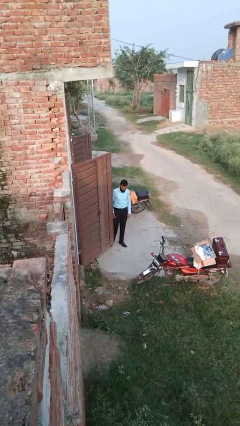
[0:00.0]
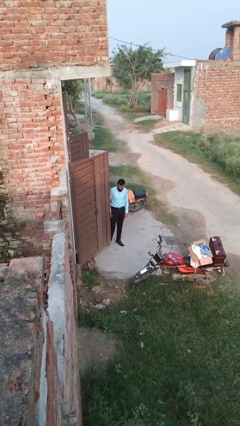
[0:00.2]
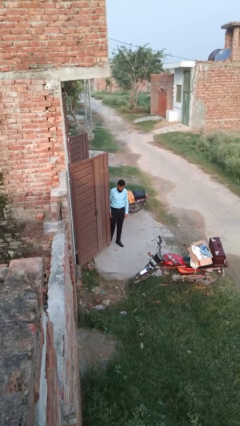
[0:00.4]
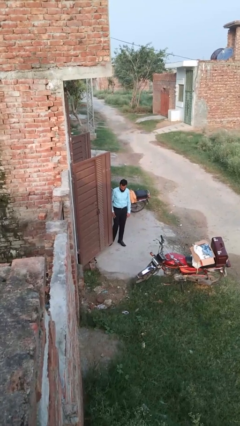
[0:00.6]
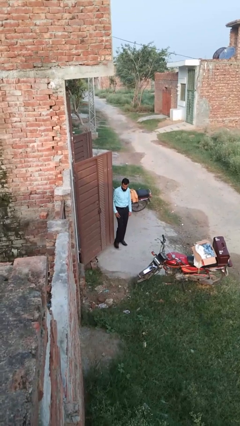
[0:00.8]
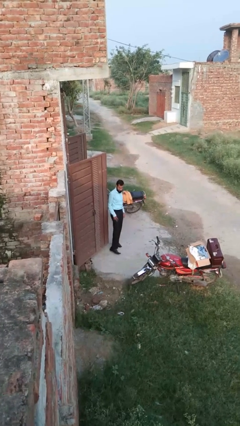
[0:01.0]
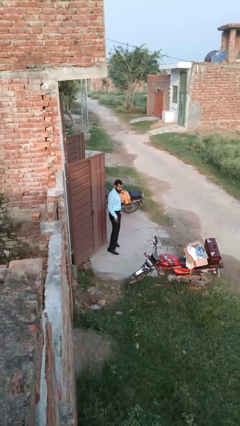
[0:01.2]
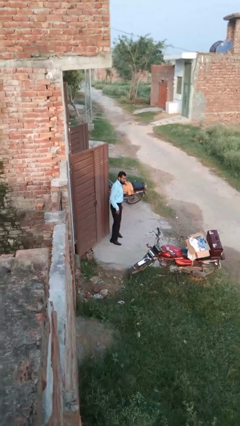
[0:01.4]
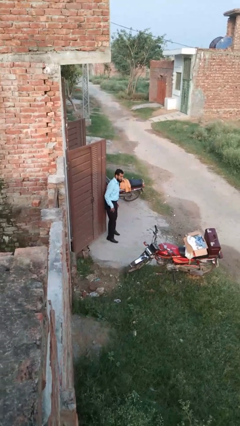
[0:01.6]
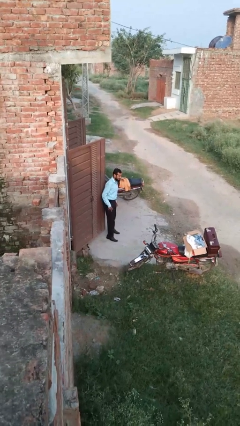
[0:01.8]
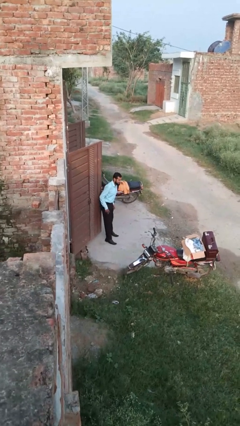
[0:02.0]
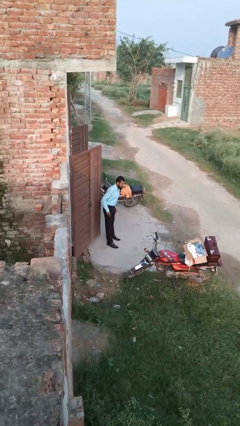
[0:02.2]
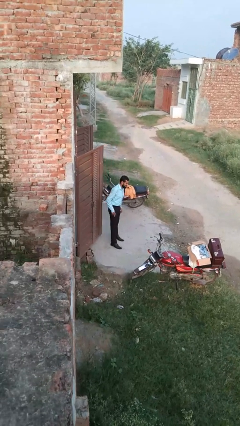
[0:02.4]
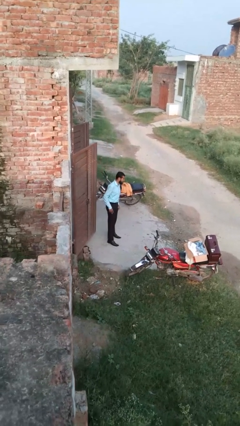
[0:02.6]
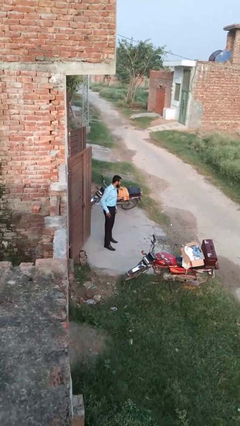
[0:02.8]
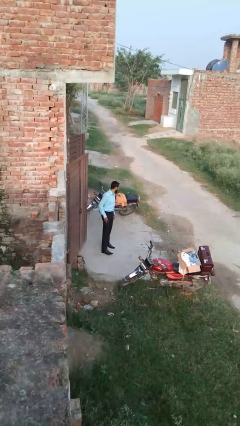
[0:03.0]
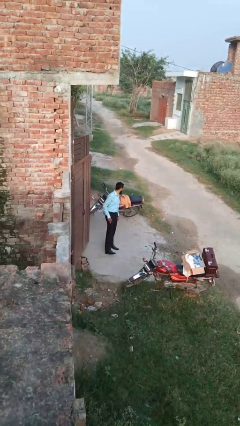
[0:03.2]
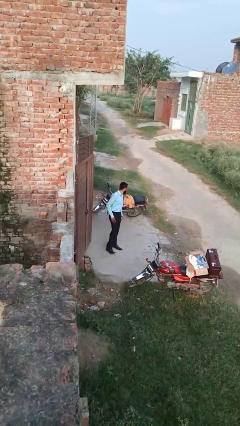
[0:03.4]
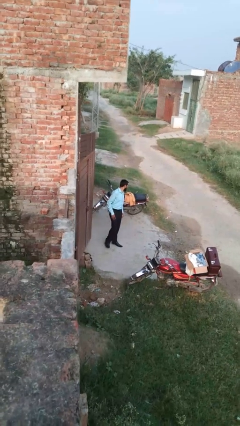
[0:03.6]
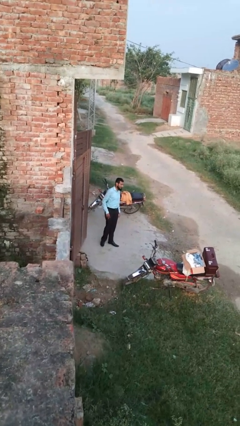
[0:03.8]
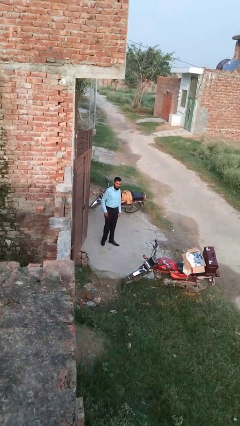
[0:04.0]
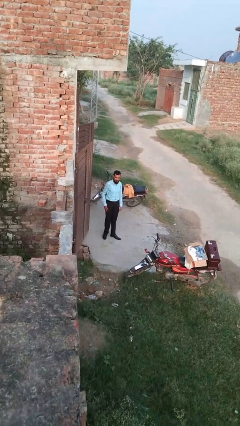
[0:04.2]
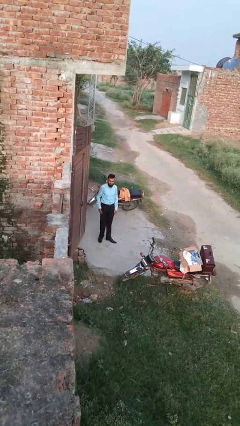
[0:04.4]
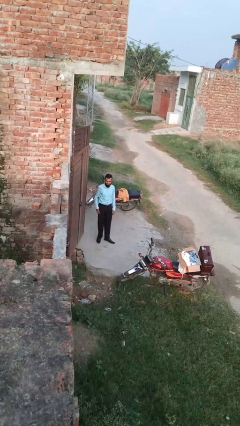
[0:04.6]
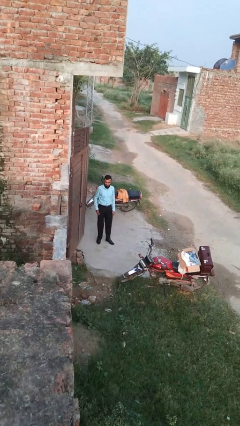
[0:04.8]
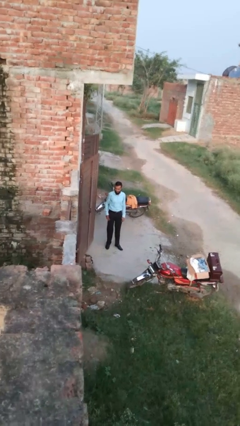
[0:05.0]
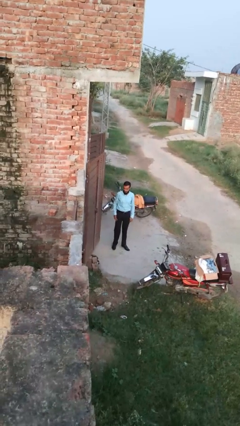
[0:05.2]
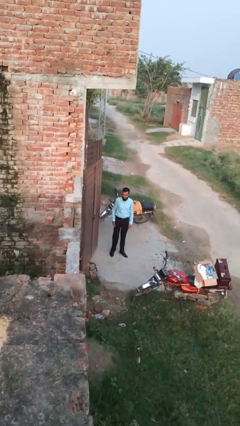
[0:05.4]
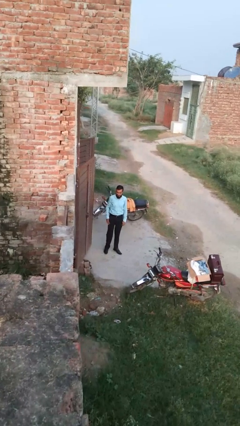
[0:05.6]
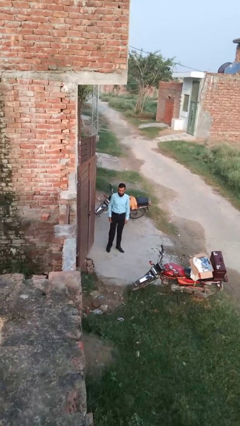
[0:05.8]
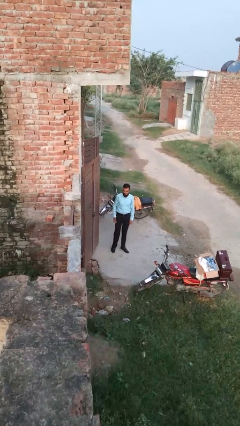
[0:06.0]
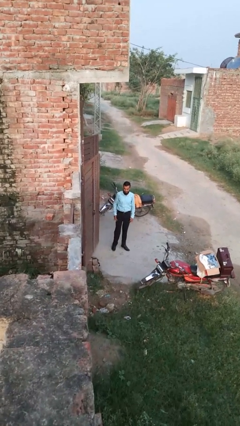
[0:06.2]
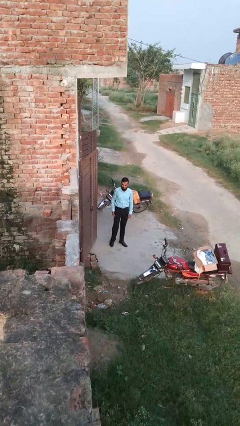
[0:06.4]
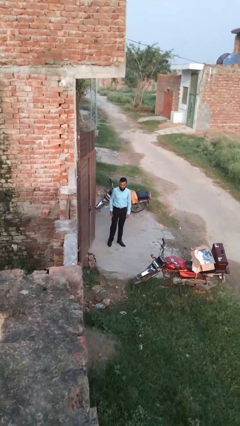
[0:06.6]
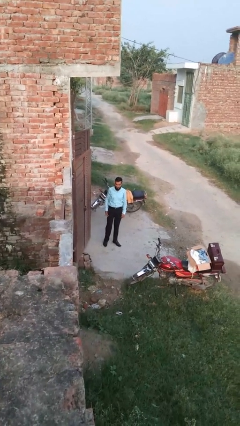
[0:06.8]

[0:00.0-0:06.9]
person closes door with hip

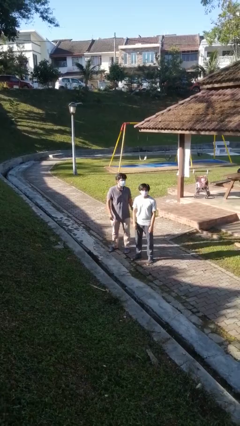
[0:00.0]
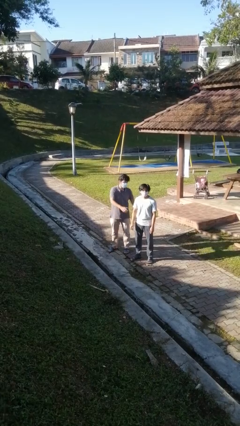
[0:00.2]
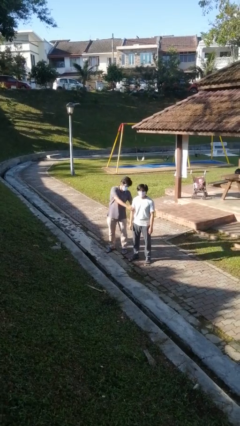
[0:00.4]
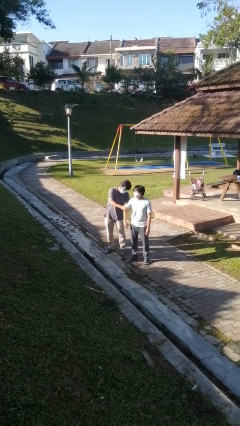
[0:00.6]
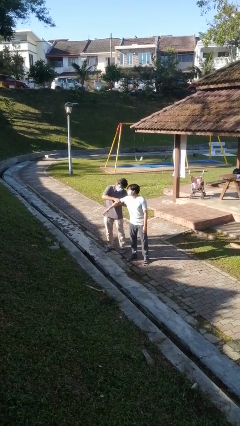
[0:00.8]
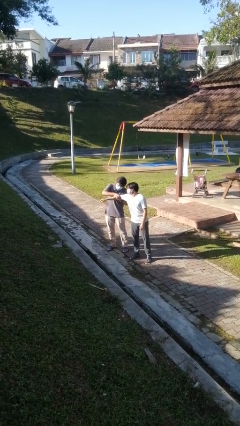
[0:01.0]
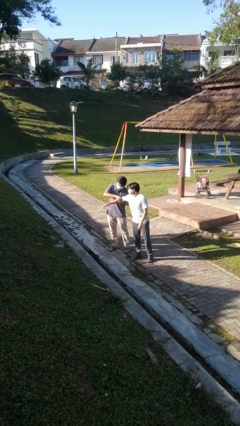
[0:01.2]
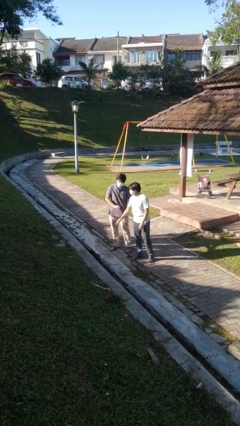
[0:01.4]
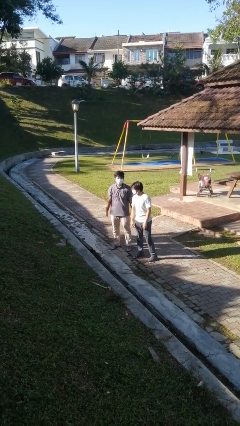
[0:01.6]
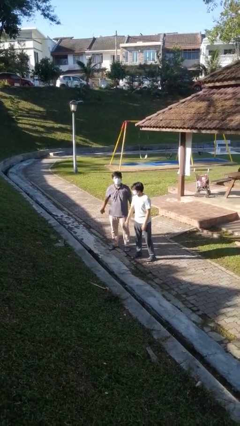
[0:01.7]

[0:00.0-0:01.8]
person grabs person by bicep

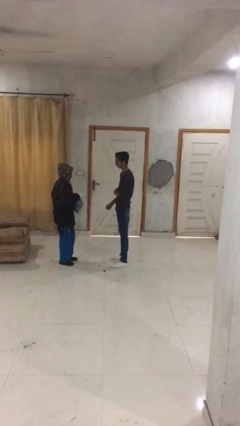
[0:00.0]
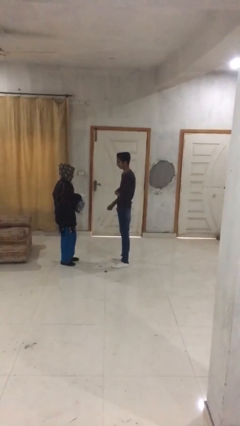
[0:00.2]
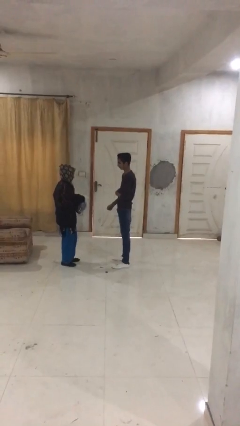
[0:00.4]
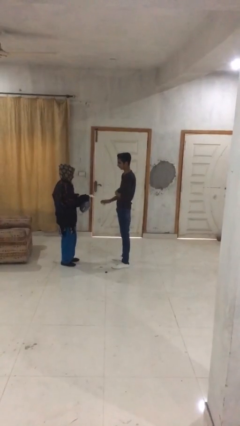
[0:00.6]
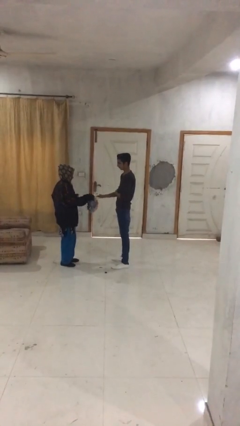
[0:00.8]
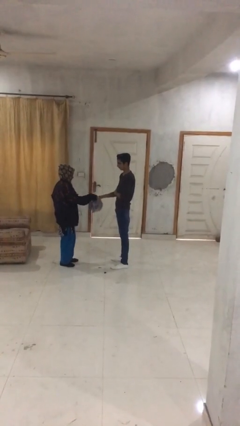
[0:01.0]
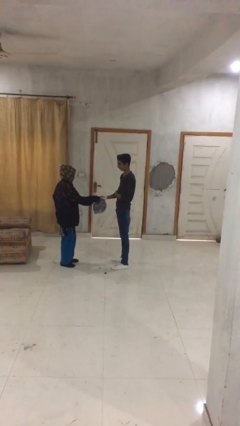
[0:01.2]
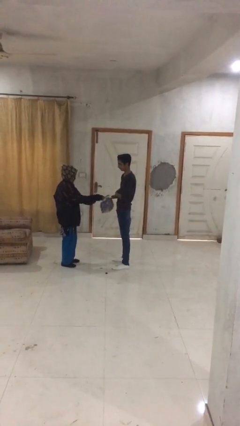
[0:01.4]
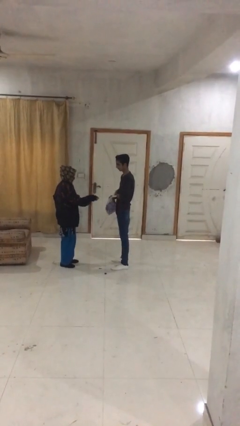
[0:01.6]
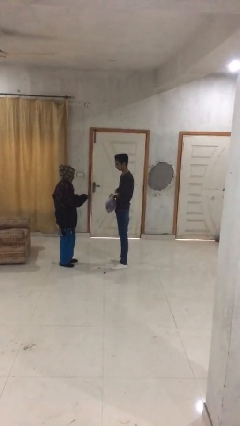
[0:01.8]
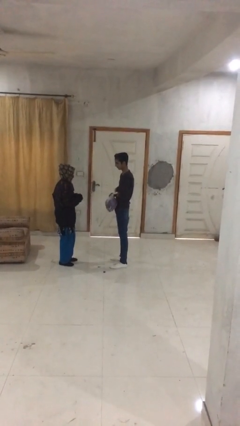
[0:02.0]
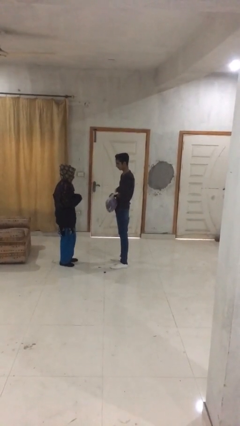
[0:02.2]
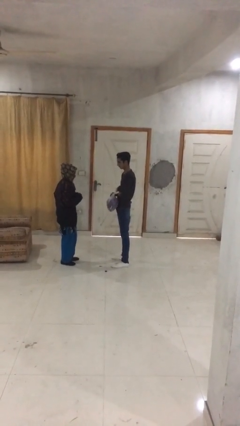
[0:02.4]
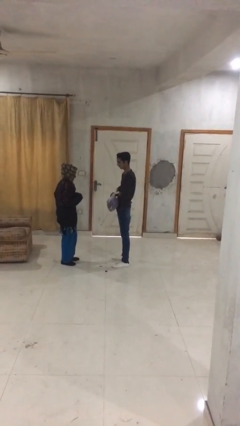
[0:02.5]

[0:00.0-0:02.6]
person transfers object to person

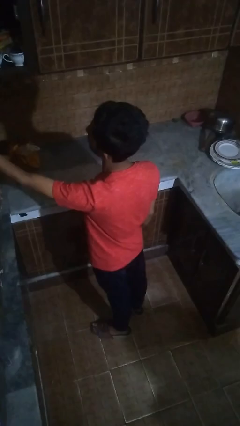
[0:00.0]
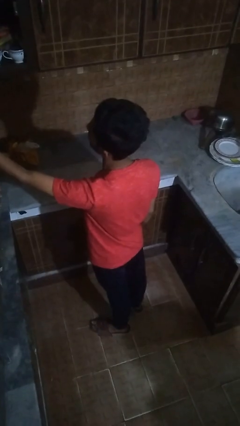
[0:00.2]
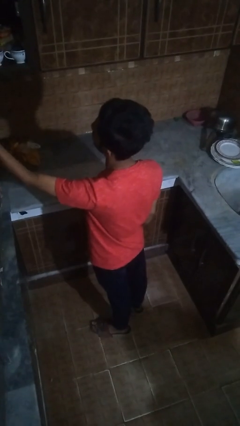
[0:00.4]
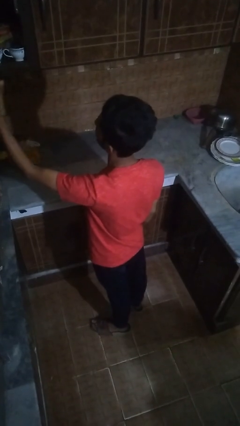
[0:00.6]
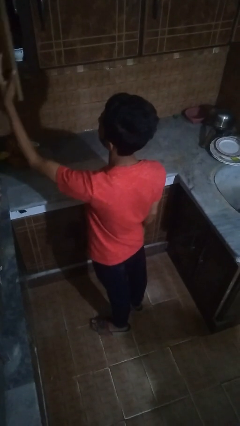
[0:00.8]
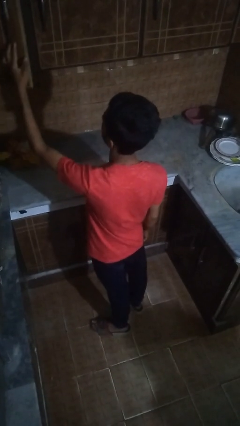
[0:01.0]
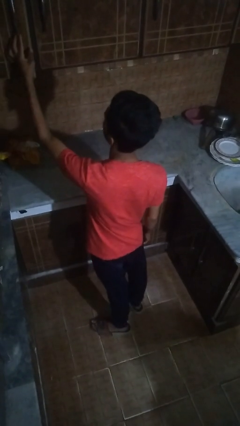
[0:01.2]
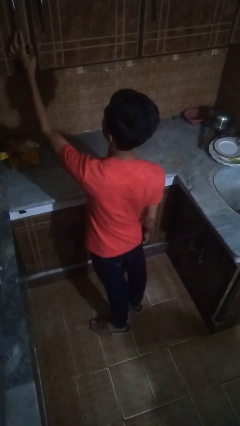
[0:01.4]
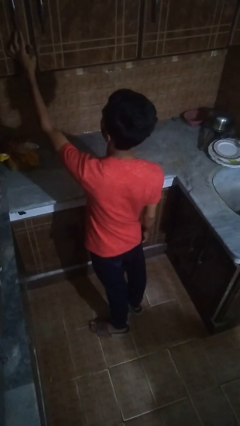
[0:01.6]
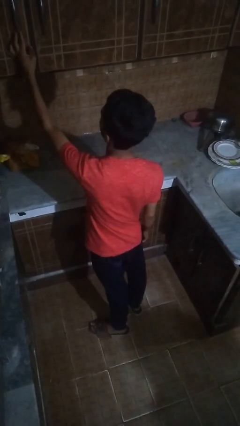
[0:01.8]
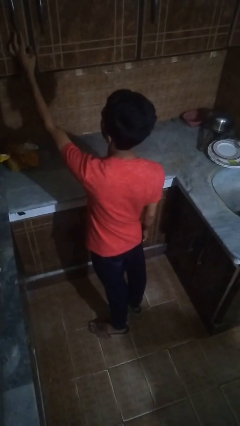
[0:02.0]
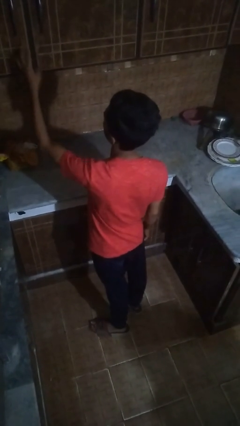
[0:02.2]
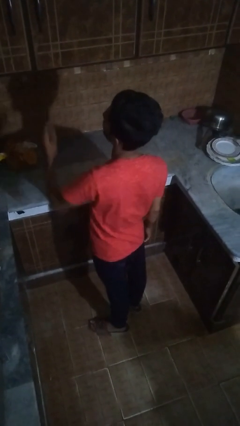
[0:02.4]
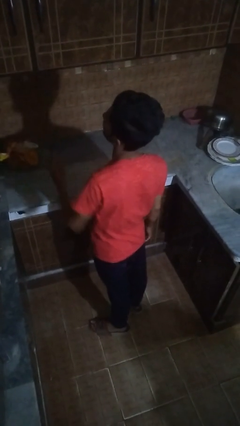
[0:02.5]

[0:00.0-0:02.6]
person closes cabinet

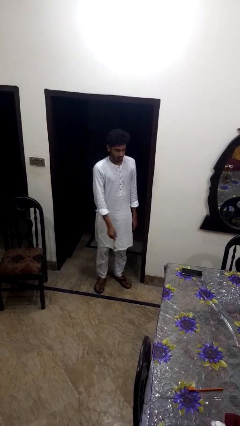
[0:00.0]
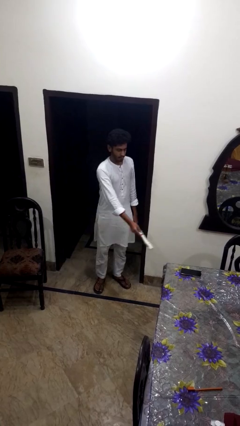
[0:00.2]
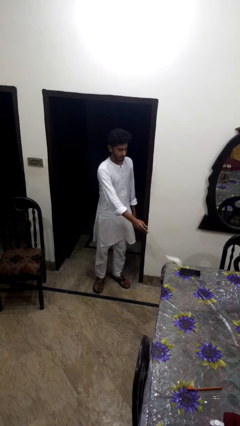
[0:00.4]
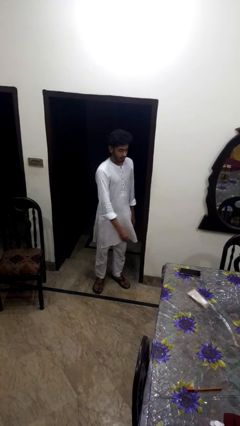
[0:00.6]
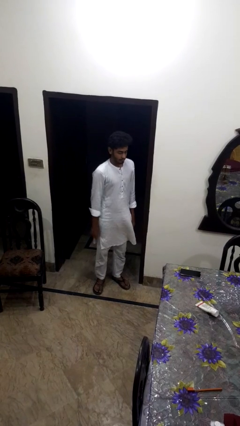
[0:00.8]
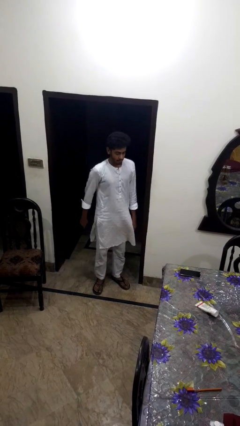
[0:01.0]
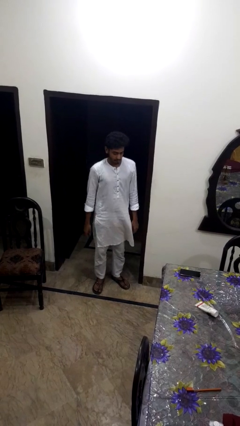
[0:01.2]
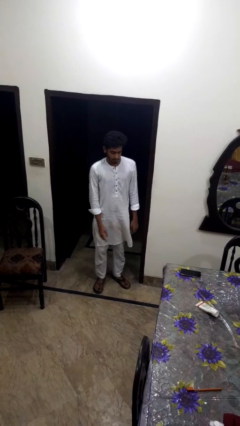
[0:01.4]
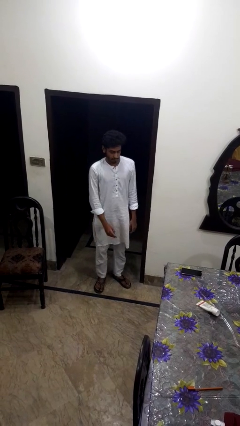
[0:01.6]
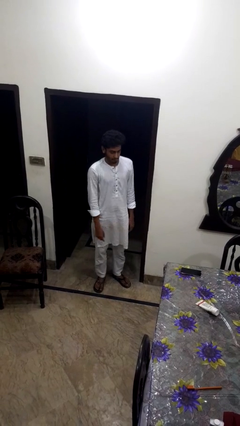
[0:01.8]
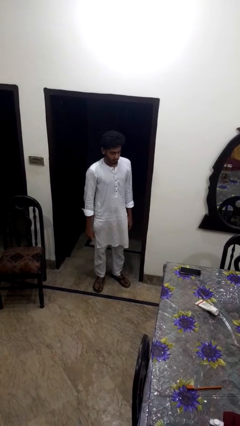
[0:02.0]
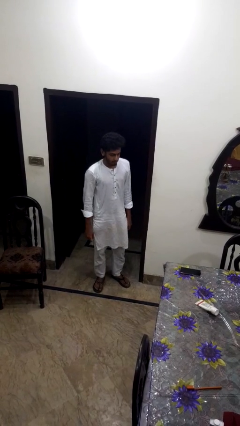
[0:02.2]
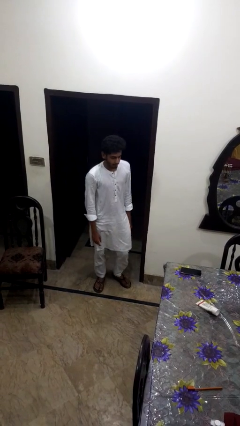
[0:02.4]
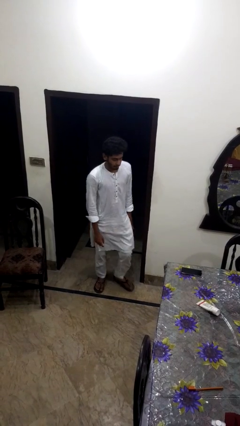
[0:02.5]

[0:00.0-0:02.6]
person throws object on table

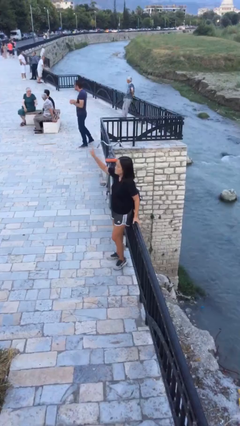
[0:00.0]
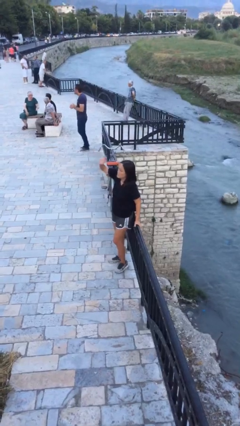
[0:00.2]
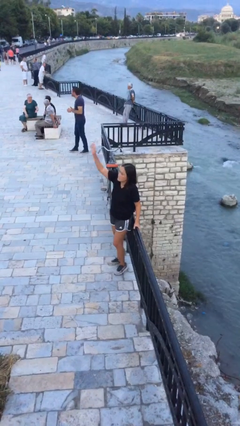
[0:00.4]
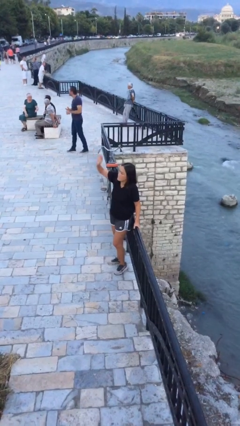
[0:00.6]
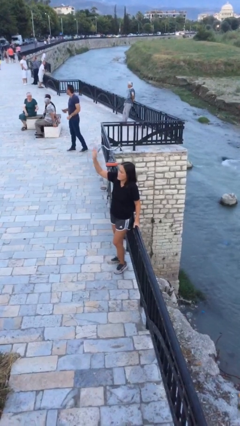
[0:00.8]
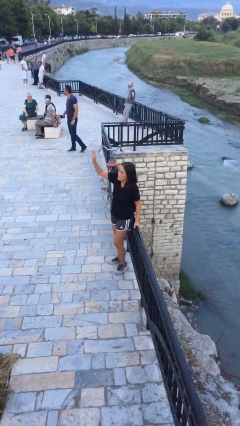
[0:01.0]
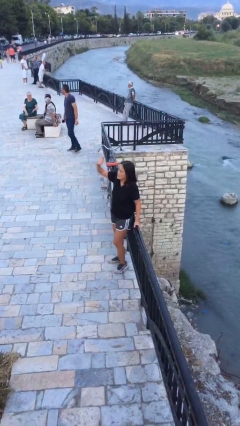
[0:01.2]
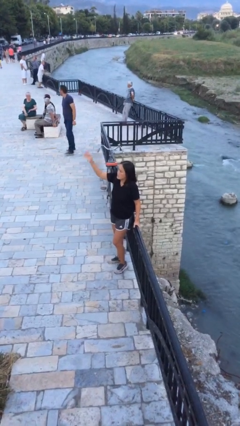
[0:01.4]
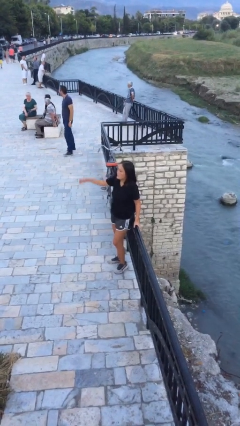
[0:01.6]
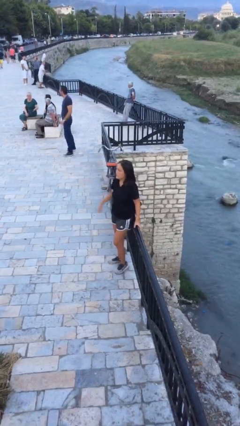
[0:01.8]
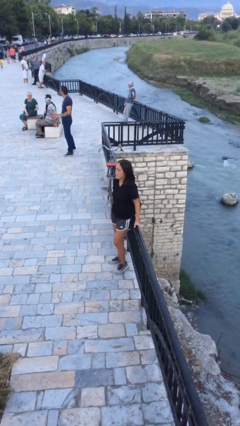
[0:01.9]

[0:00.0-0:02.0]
person waves at person
